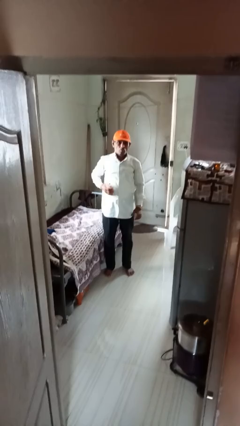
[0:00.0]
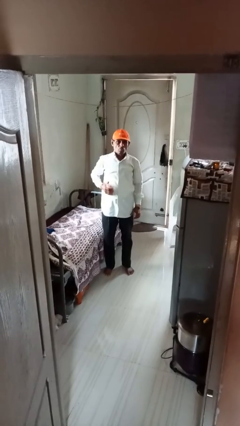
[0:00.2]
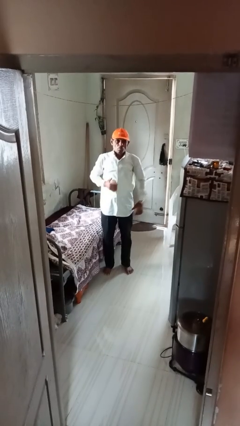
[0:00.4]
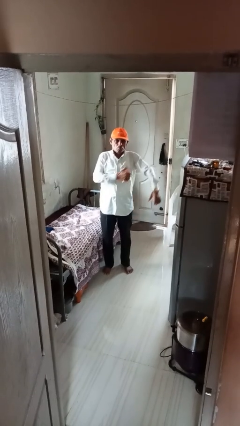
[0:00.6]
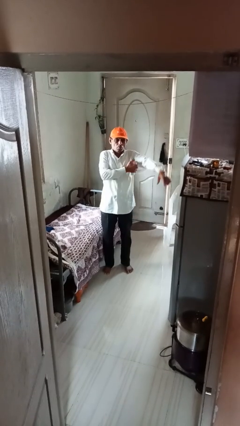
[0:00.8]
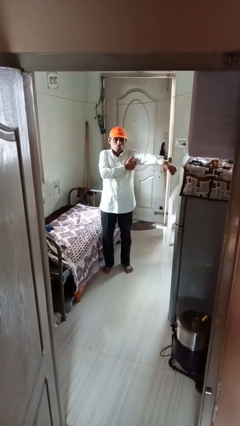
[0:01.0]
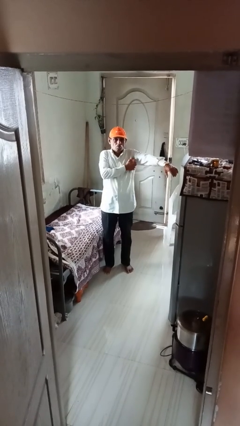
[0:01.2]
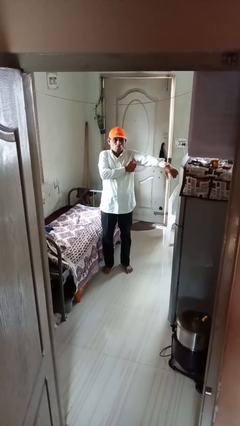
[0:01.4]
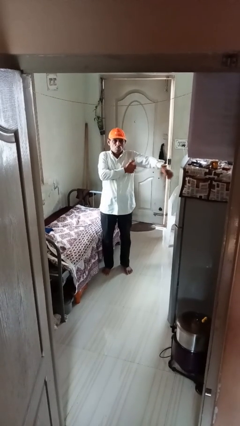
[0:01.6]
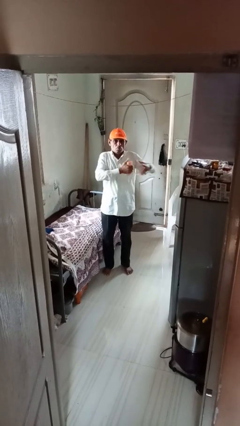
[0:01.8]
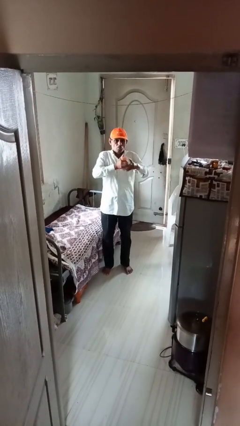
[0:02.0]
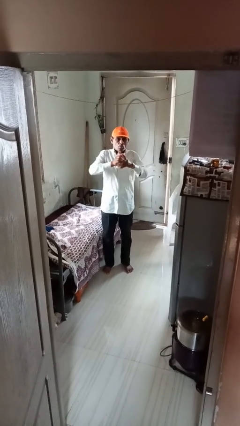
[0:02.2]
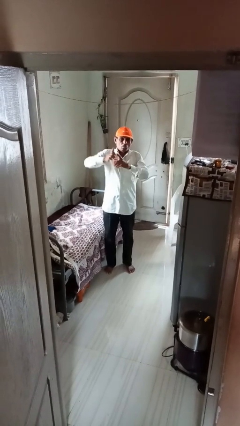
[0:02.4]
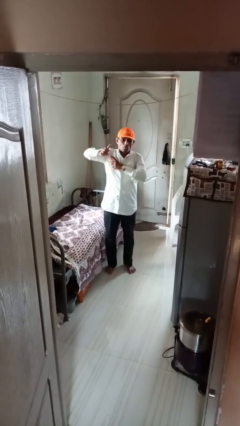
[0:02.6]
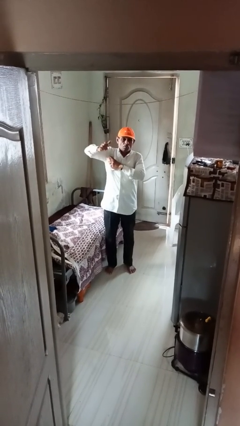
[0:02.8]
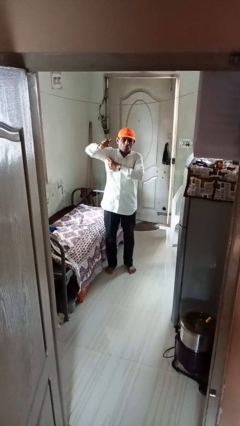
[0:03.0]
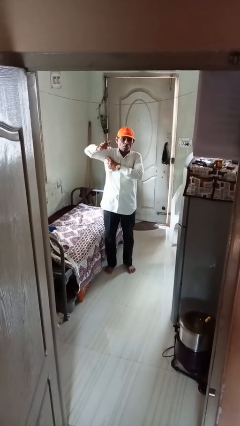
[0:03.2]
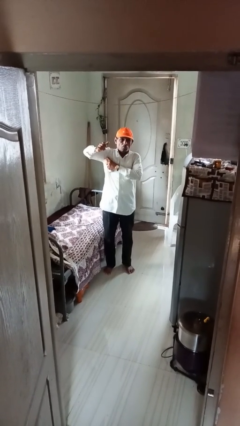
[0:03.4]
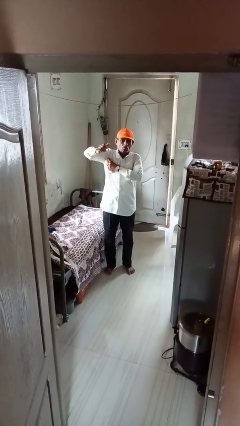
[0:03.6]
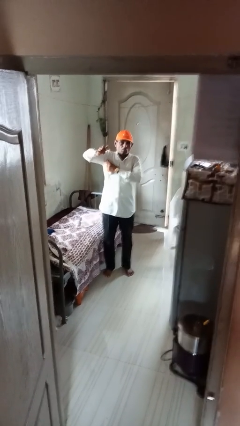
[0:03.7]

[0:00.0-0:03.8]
person applies deodorant

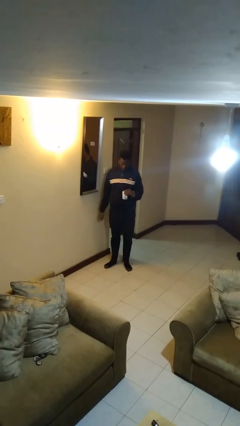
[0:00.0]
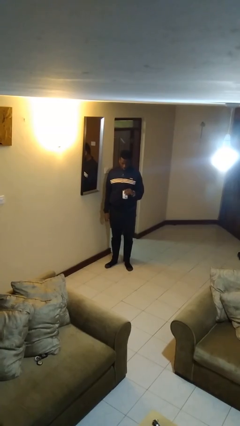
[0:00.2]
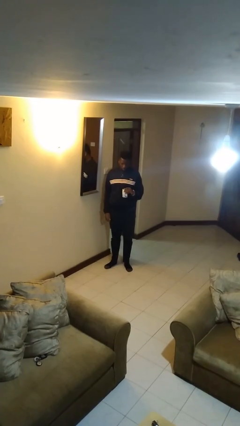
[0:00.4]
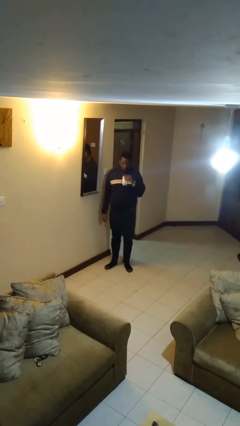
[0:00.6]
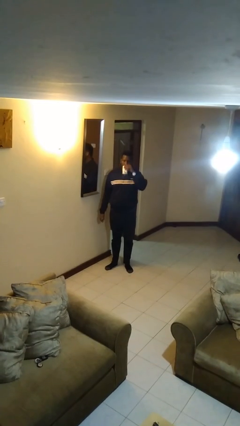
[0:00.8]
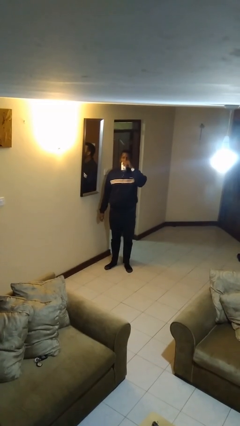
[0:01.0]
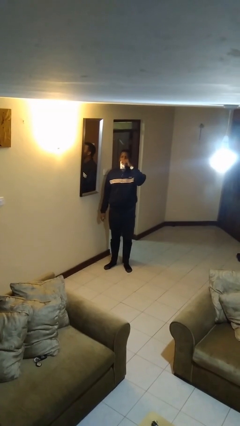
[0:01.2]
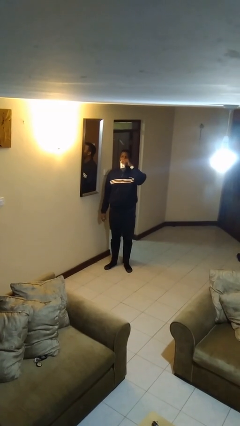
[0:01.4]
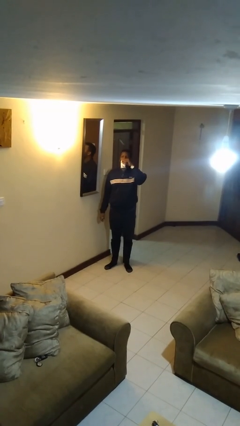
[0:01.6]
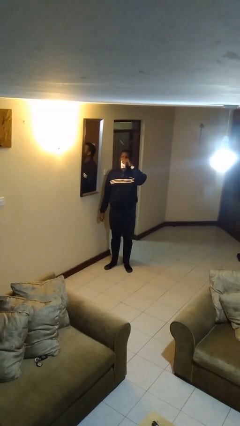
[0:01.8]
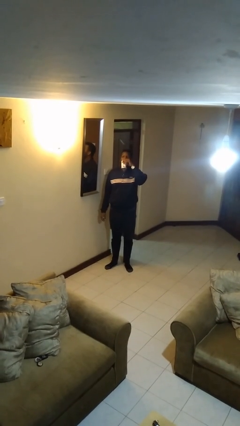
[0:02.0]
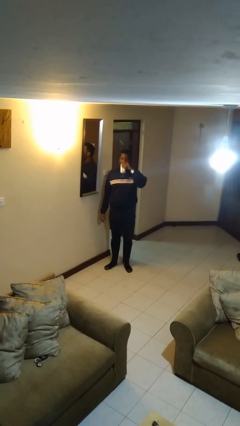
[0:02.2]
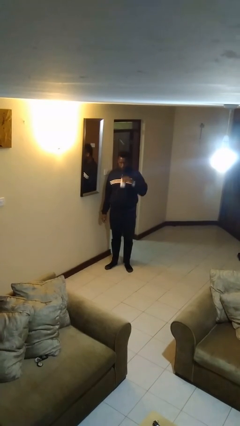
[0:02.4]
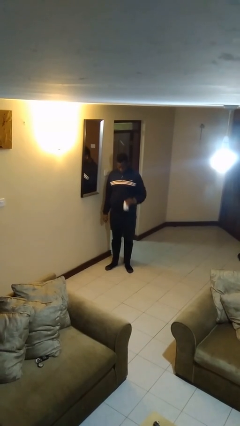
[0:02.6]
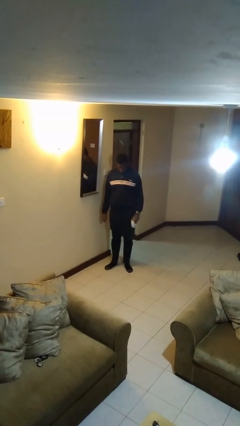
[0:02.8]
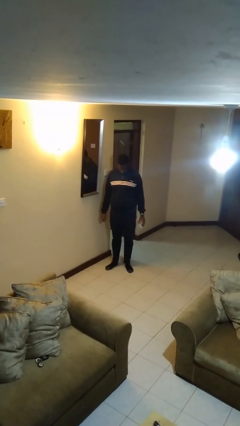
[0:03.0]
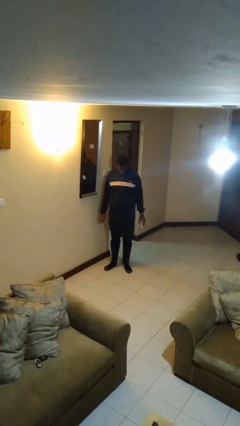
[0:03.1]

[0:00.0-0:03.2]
person drinks from beverage can

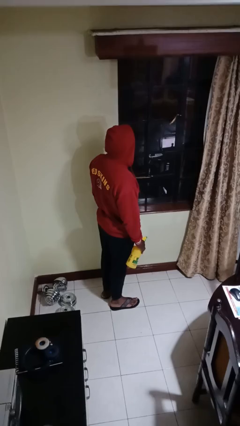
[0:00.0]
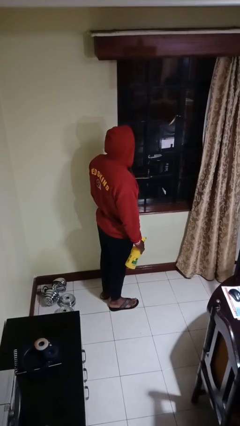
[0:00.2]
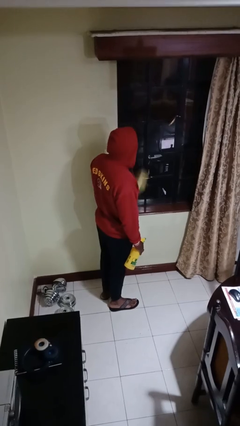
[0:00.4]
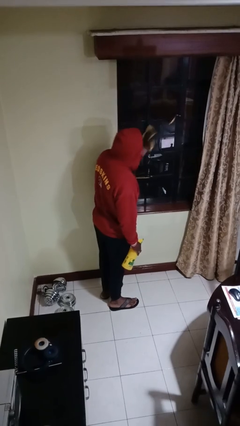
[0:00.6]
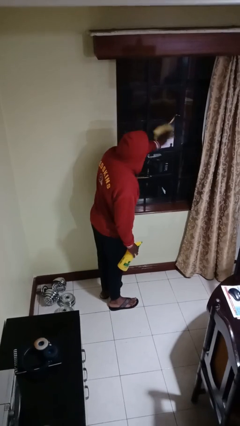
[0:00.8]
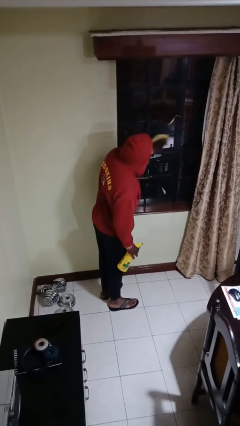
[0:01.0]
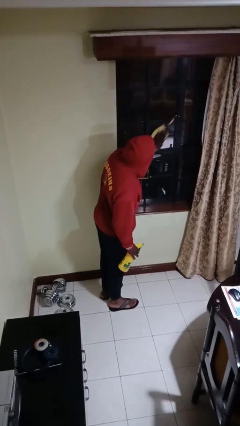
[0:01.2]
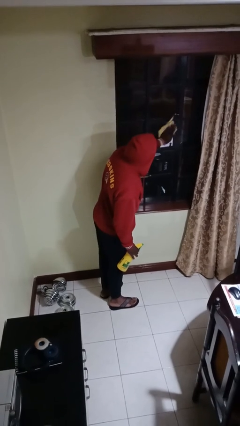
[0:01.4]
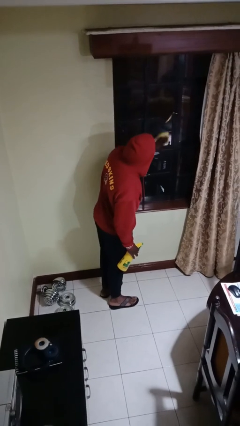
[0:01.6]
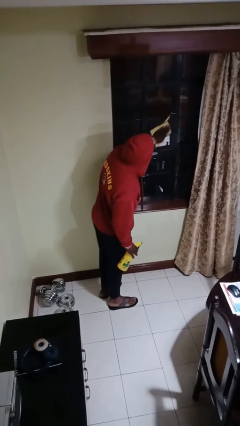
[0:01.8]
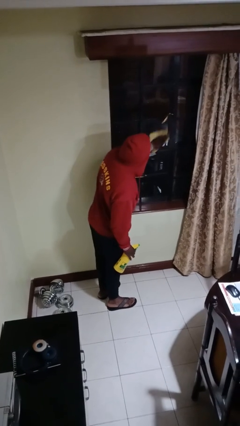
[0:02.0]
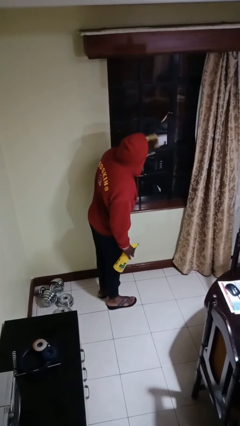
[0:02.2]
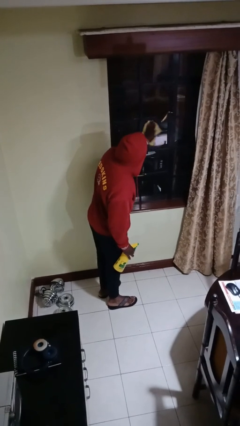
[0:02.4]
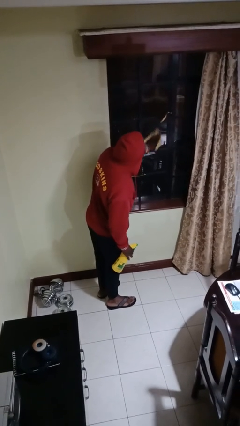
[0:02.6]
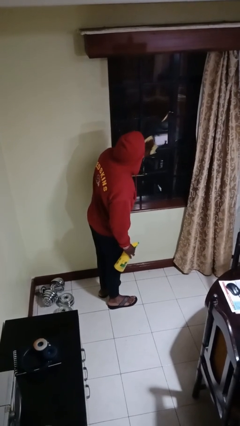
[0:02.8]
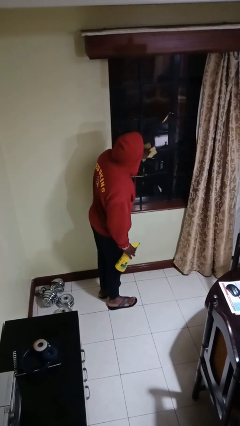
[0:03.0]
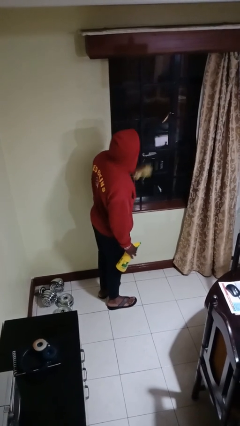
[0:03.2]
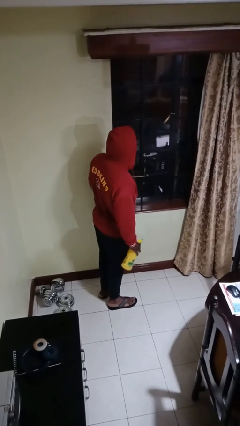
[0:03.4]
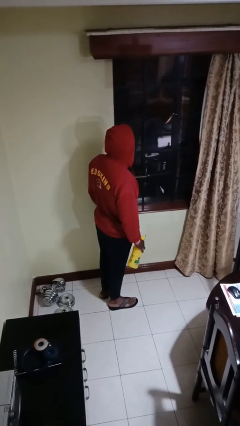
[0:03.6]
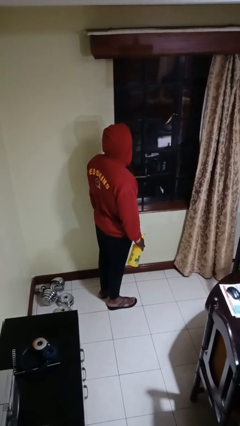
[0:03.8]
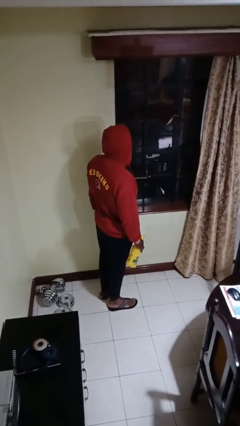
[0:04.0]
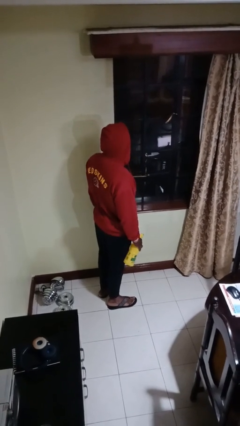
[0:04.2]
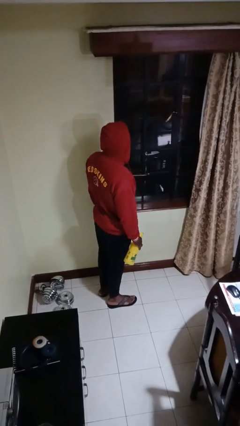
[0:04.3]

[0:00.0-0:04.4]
person washes window

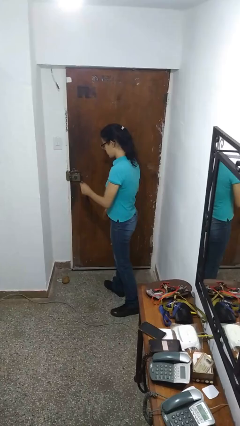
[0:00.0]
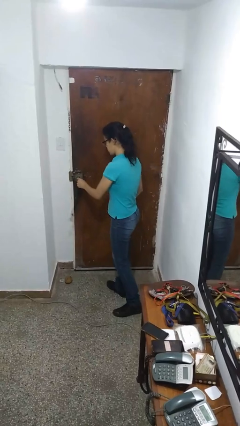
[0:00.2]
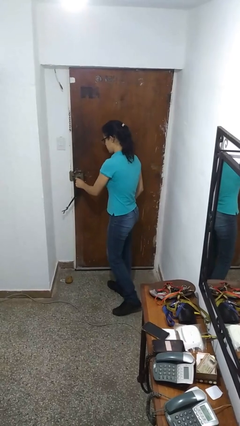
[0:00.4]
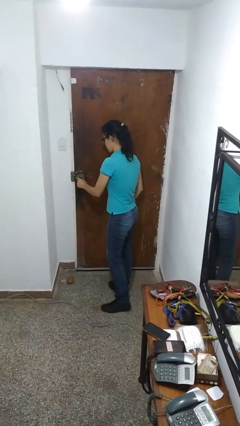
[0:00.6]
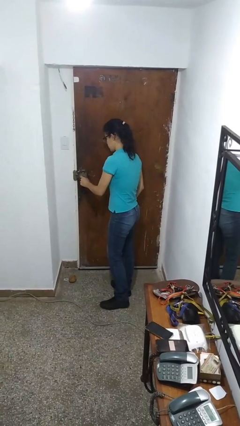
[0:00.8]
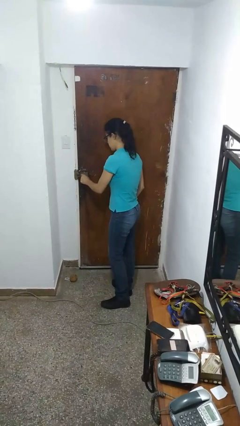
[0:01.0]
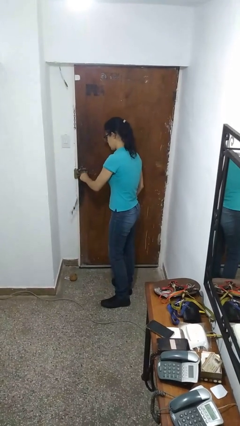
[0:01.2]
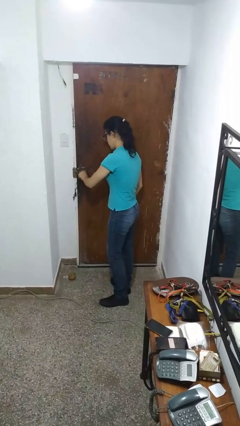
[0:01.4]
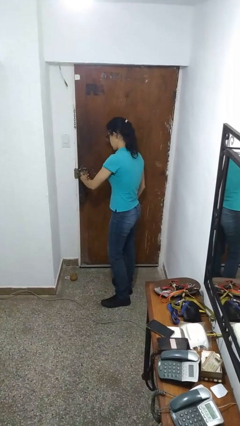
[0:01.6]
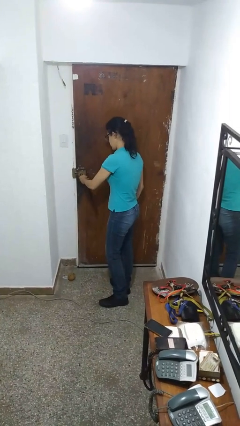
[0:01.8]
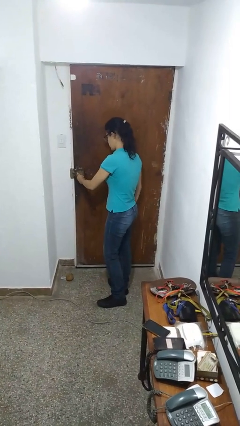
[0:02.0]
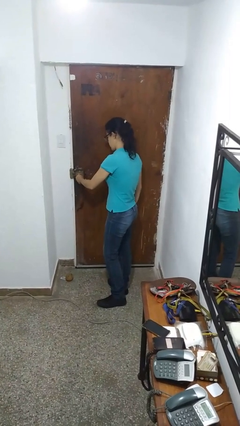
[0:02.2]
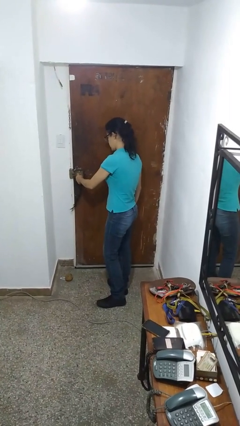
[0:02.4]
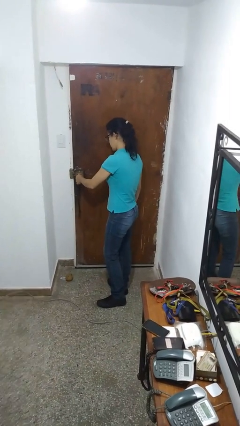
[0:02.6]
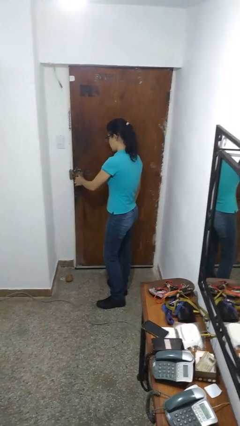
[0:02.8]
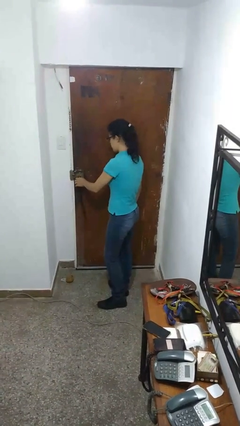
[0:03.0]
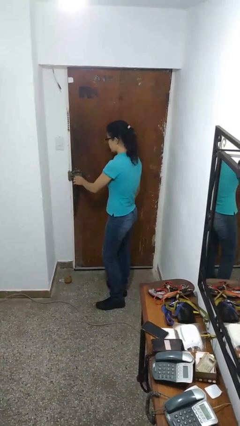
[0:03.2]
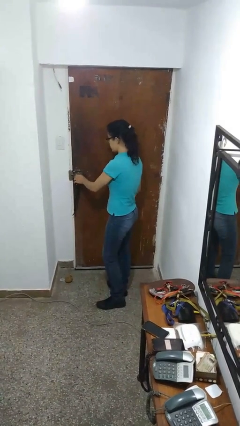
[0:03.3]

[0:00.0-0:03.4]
person unlocks door with keys

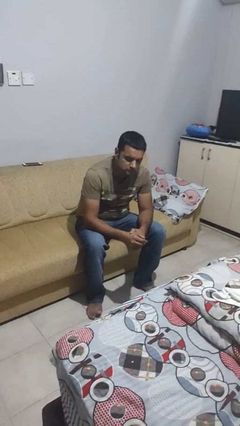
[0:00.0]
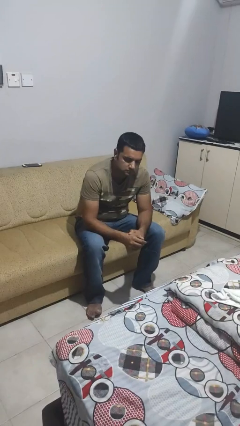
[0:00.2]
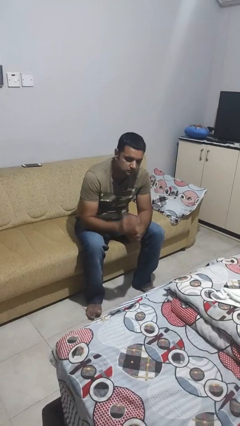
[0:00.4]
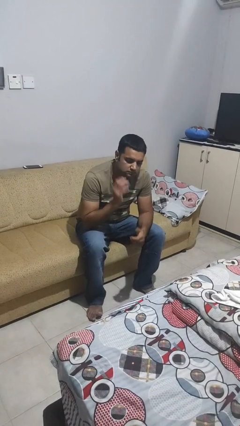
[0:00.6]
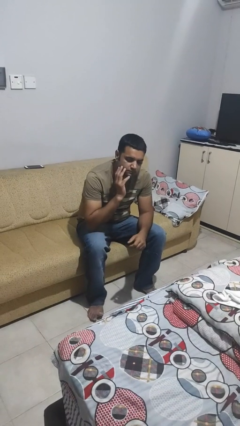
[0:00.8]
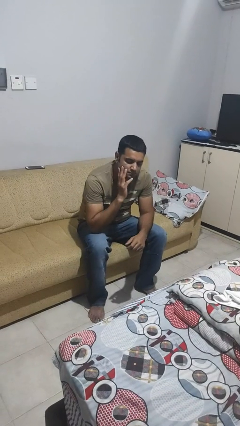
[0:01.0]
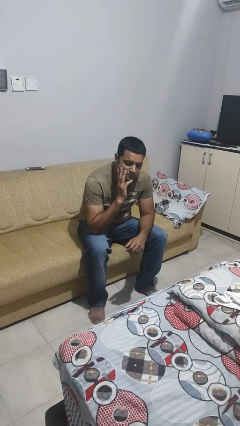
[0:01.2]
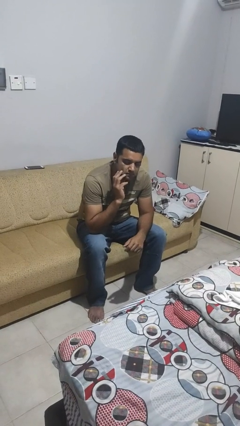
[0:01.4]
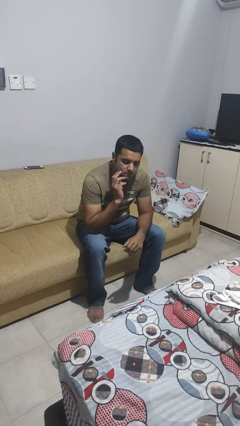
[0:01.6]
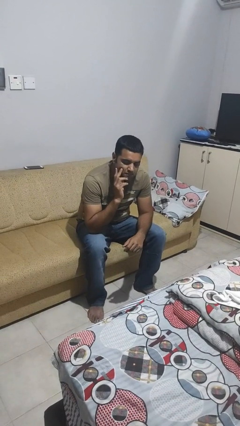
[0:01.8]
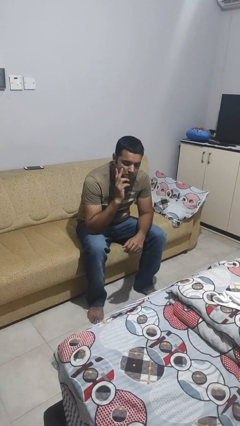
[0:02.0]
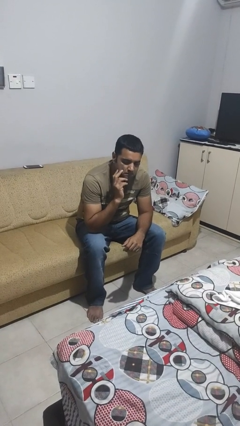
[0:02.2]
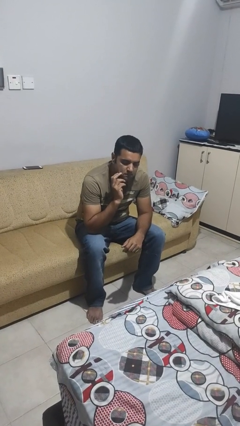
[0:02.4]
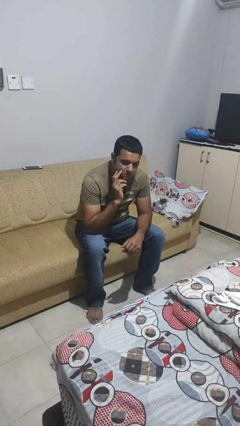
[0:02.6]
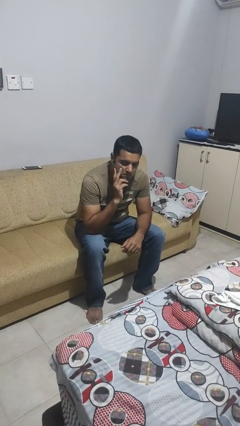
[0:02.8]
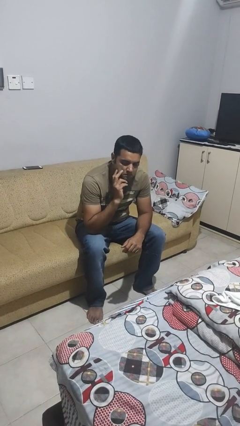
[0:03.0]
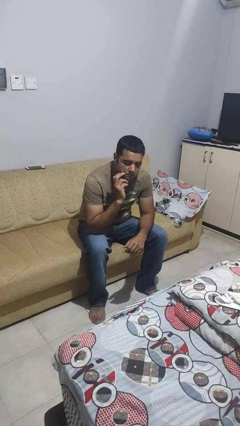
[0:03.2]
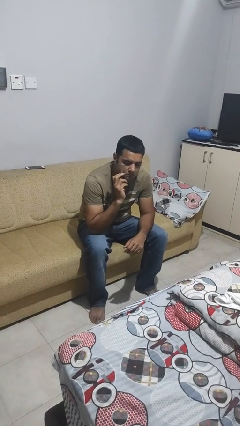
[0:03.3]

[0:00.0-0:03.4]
person strokes chin
